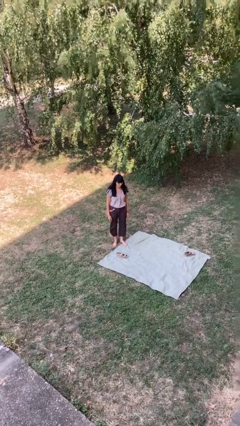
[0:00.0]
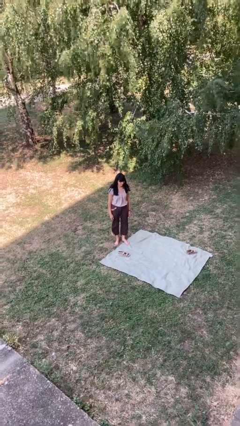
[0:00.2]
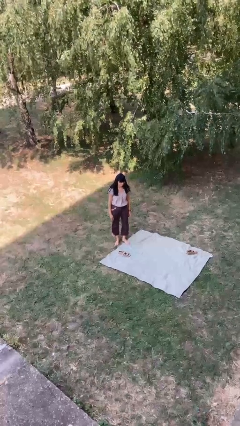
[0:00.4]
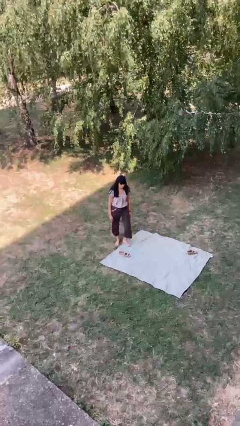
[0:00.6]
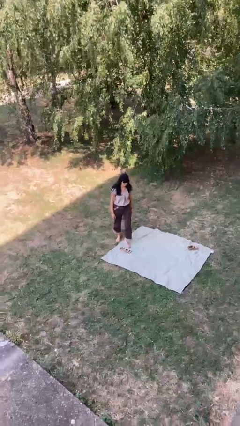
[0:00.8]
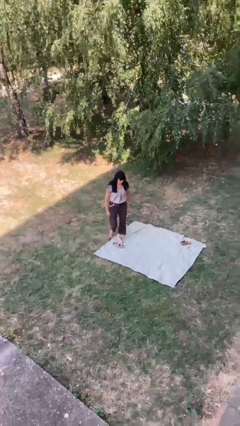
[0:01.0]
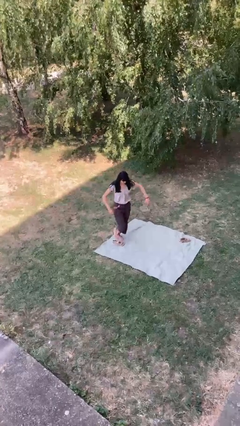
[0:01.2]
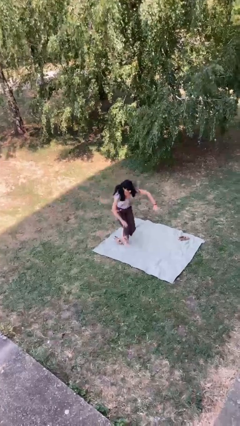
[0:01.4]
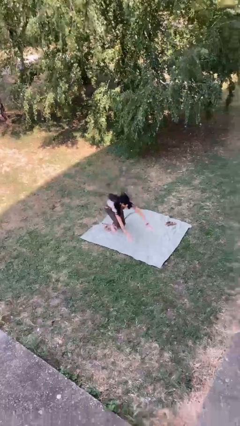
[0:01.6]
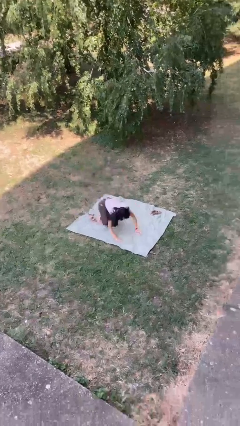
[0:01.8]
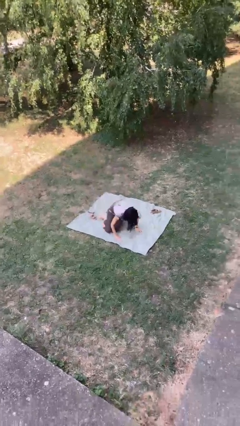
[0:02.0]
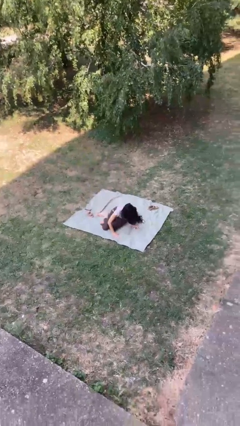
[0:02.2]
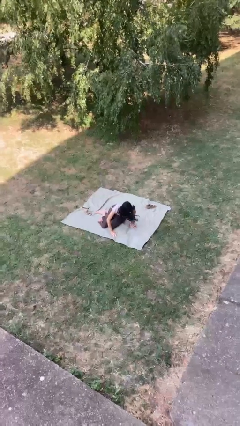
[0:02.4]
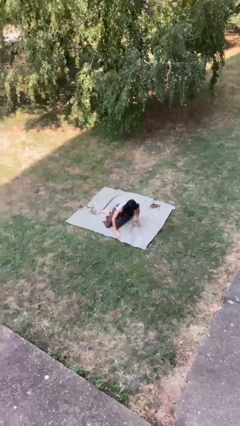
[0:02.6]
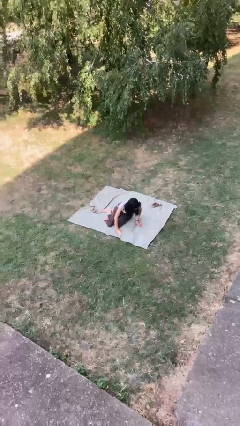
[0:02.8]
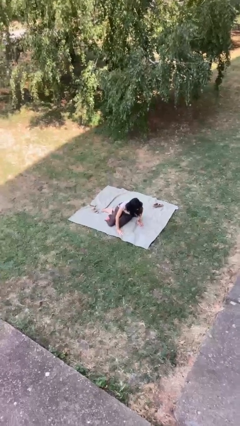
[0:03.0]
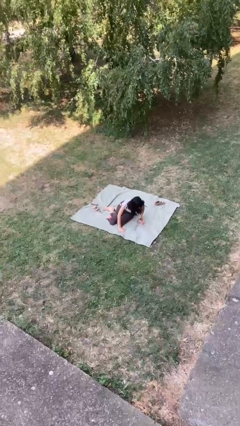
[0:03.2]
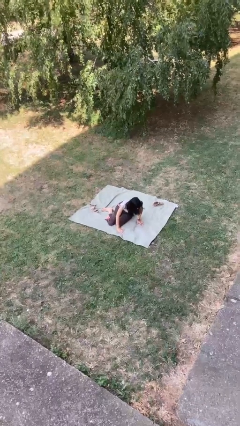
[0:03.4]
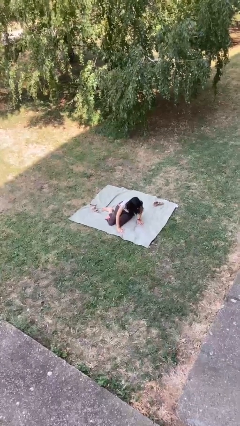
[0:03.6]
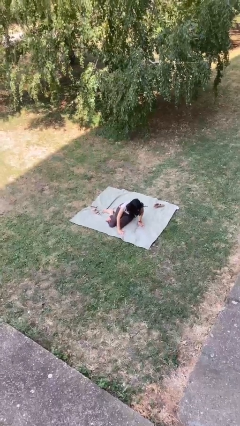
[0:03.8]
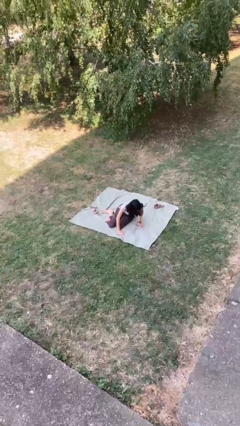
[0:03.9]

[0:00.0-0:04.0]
person trips on object on floor

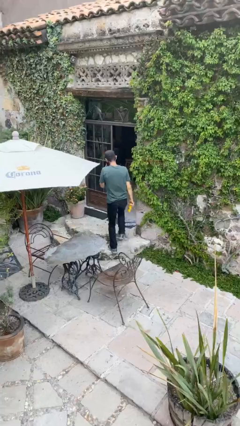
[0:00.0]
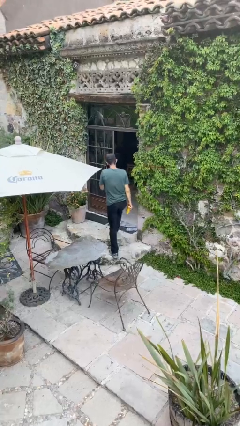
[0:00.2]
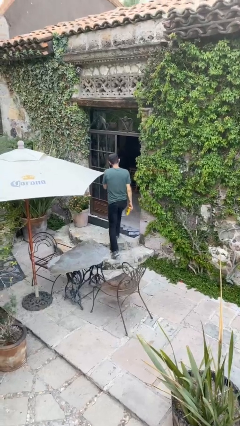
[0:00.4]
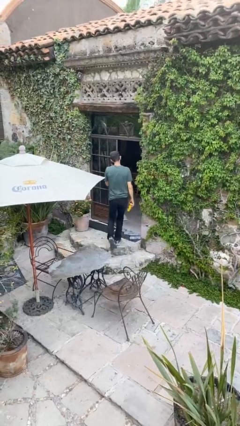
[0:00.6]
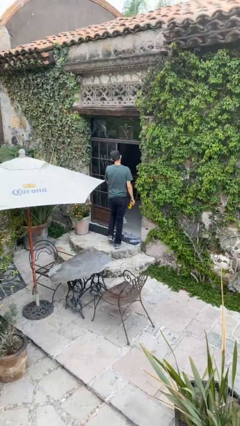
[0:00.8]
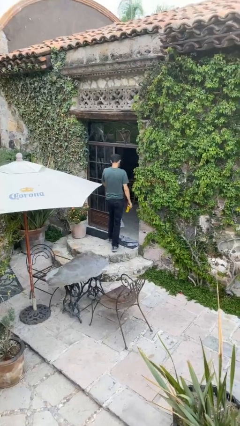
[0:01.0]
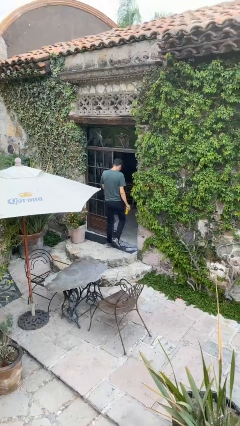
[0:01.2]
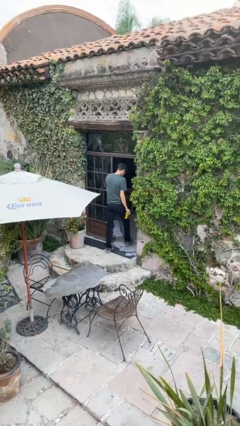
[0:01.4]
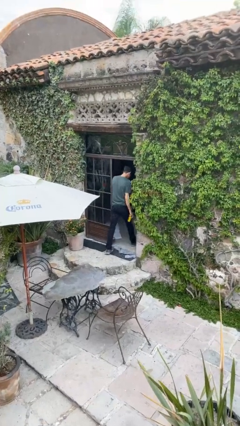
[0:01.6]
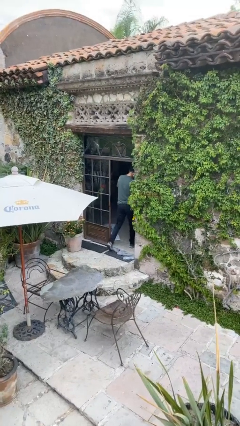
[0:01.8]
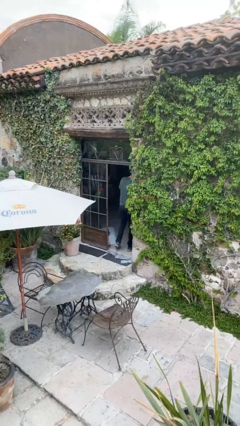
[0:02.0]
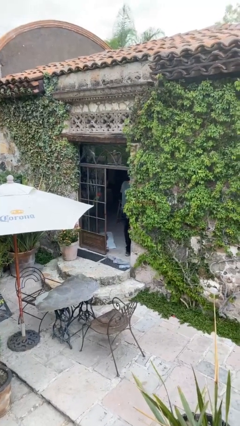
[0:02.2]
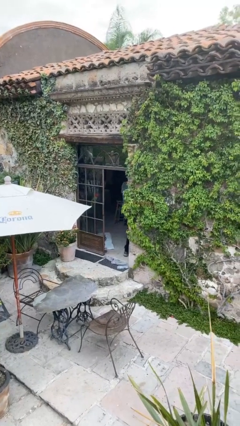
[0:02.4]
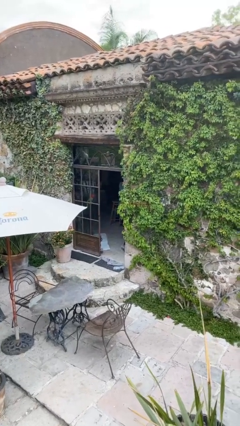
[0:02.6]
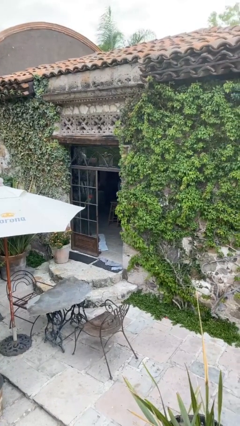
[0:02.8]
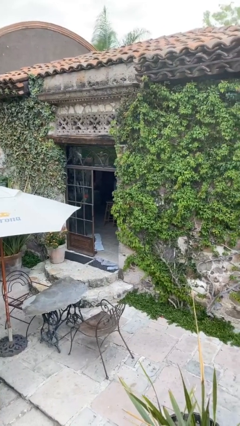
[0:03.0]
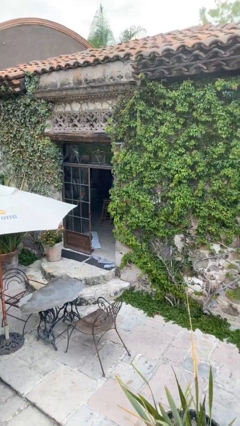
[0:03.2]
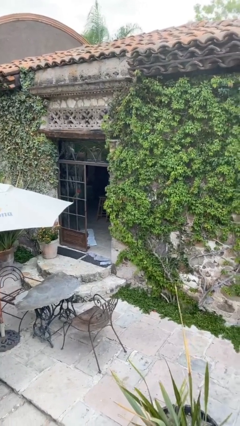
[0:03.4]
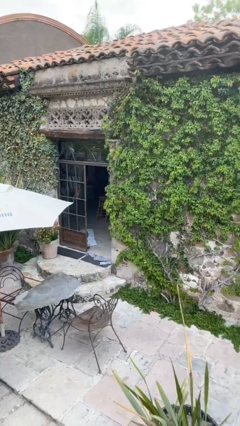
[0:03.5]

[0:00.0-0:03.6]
person exits scene through structure

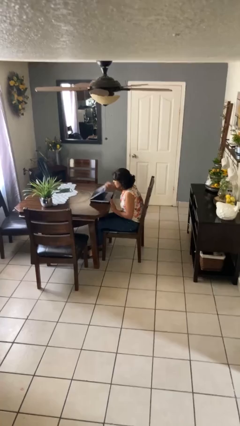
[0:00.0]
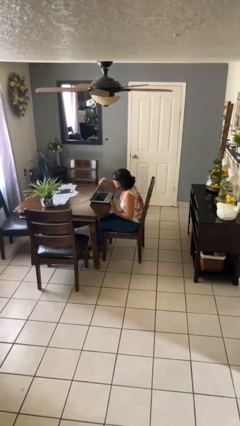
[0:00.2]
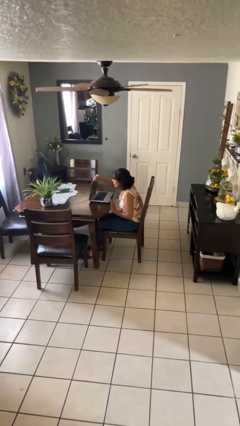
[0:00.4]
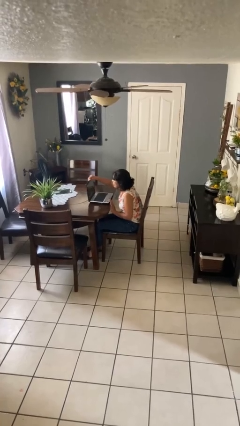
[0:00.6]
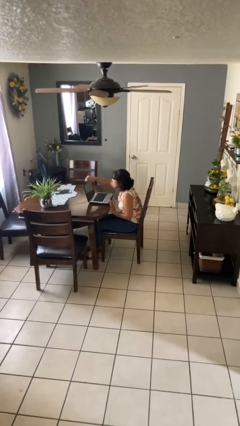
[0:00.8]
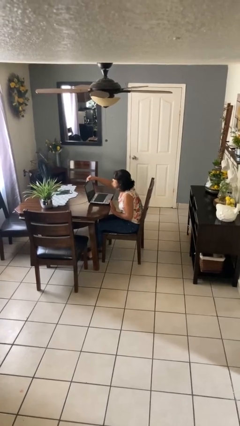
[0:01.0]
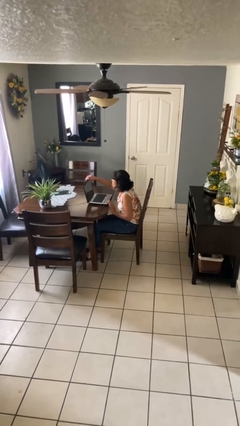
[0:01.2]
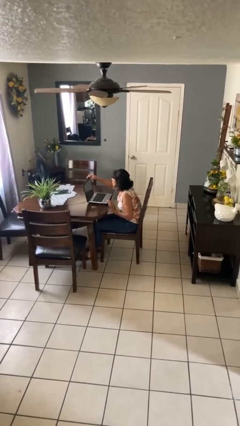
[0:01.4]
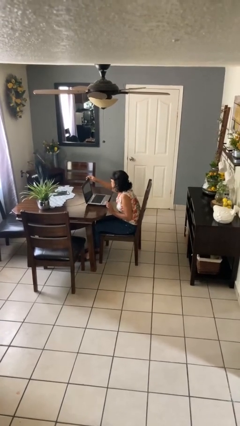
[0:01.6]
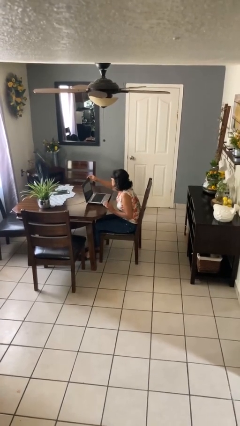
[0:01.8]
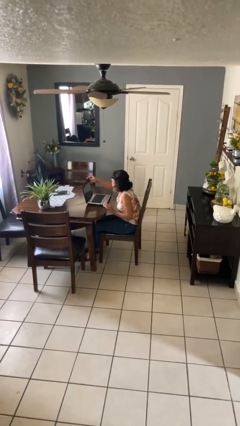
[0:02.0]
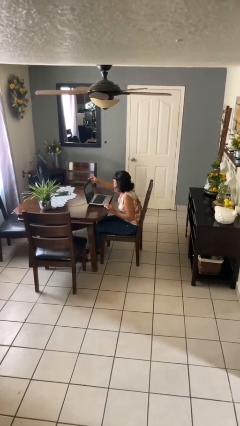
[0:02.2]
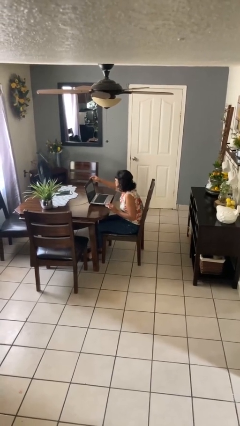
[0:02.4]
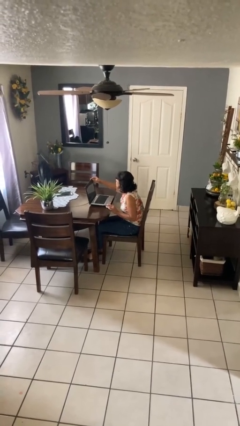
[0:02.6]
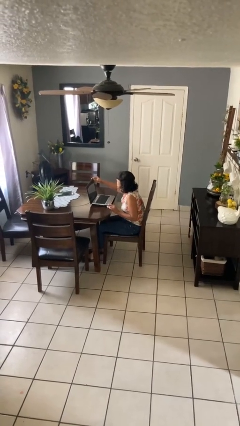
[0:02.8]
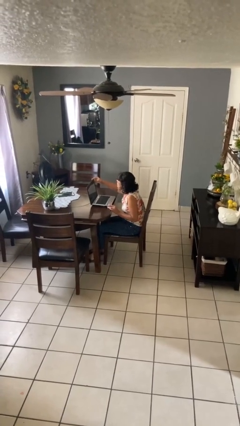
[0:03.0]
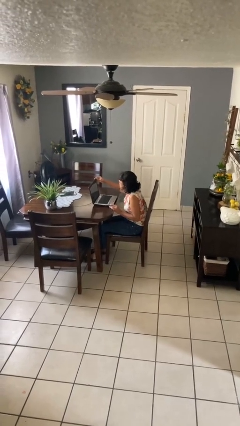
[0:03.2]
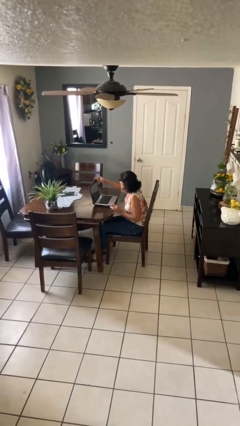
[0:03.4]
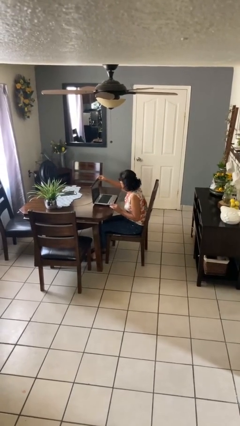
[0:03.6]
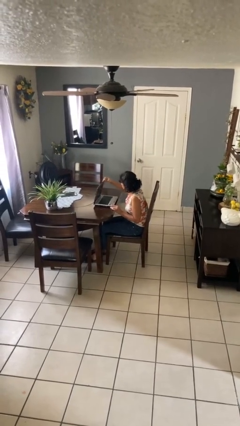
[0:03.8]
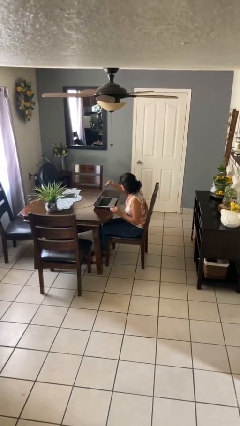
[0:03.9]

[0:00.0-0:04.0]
person opens laptop

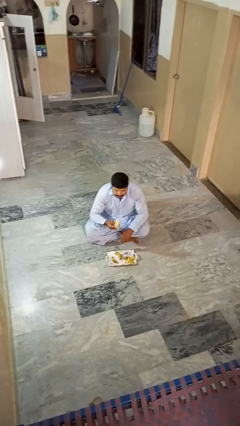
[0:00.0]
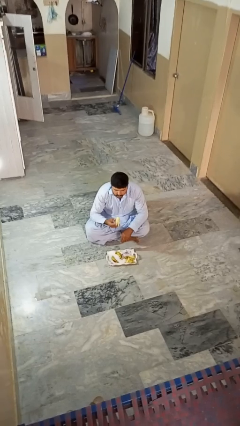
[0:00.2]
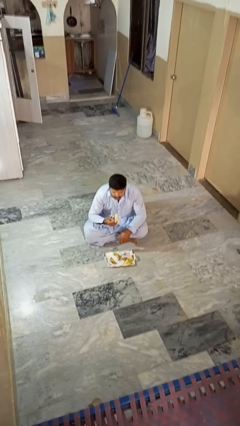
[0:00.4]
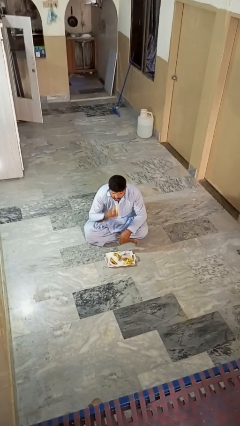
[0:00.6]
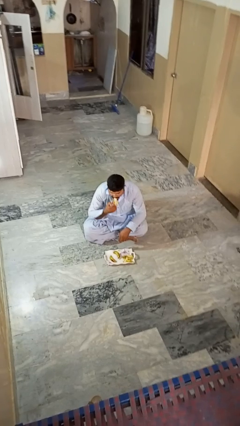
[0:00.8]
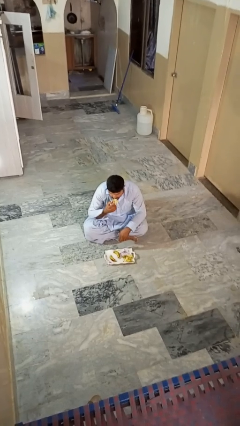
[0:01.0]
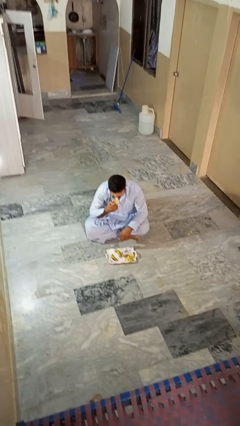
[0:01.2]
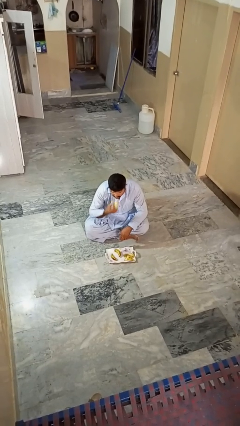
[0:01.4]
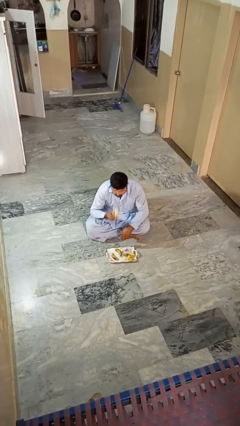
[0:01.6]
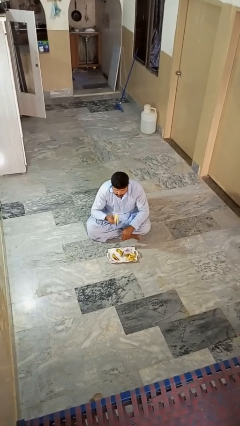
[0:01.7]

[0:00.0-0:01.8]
person eats banana

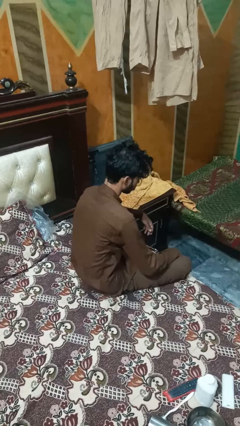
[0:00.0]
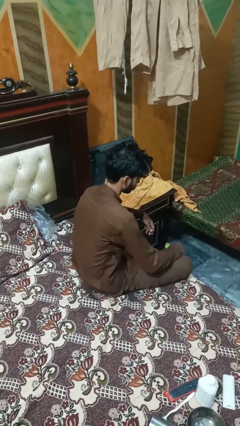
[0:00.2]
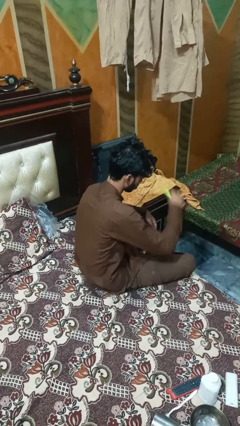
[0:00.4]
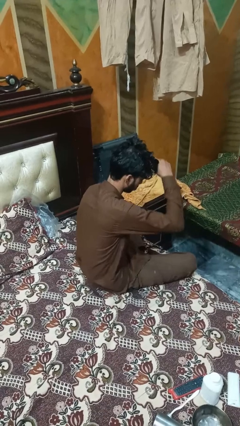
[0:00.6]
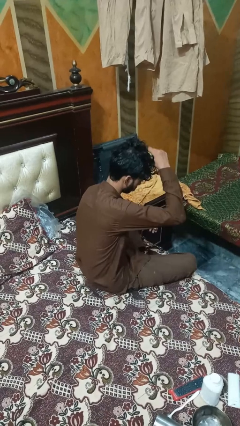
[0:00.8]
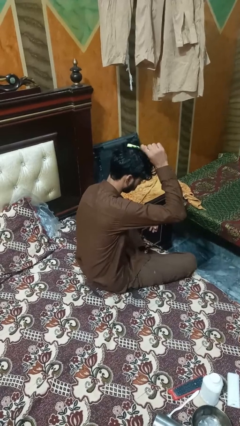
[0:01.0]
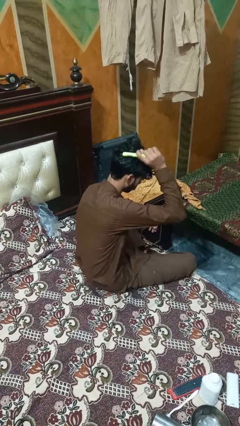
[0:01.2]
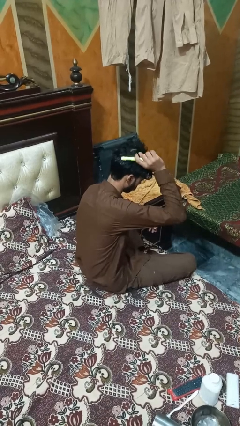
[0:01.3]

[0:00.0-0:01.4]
person brushes hair

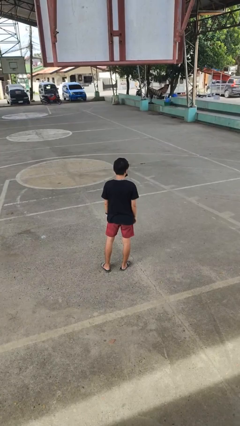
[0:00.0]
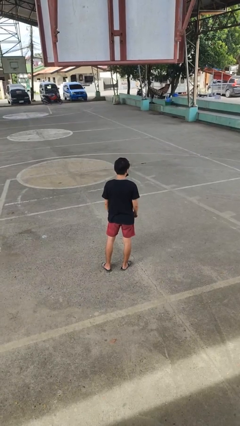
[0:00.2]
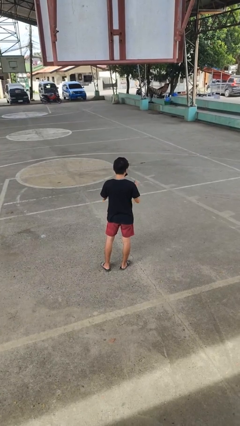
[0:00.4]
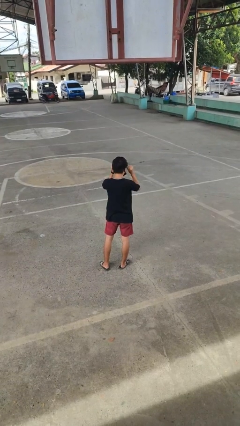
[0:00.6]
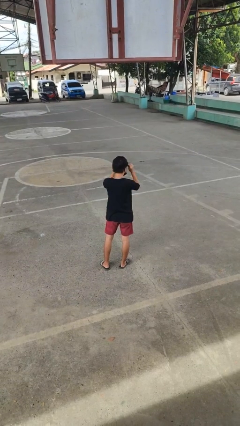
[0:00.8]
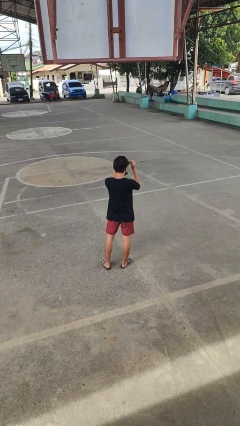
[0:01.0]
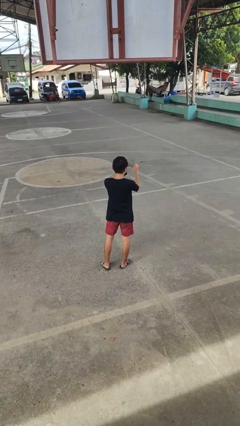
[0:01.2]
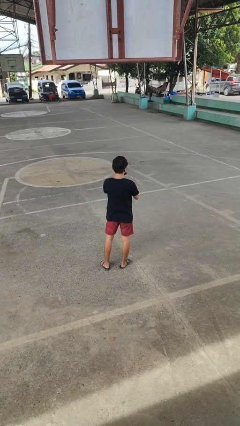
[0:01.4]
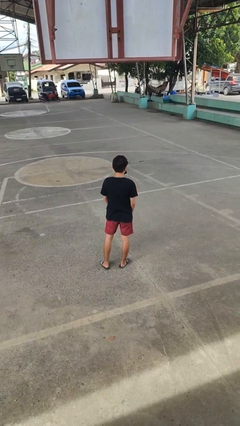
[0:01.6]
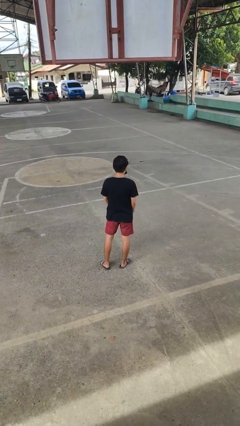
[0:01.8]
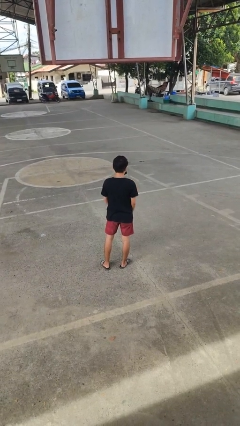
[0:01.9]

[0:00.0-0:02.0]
person takes off glasses

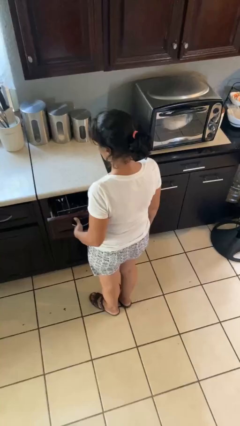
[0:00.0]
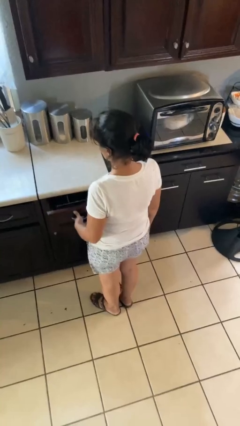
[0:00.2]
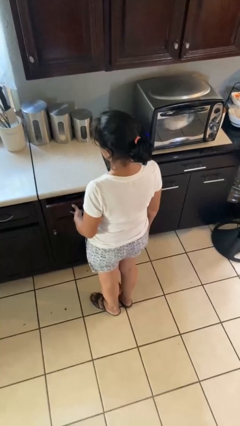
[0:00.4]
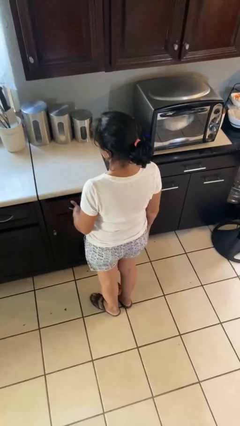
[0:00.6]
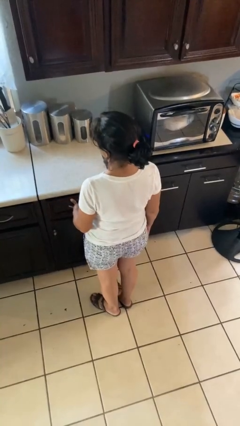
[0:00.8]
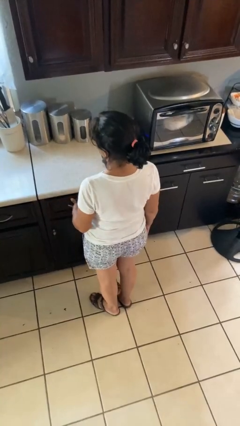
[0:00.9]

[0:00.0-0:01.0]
person closes kitchen drawer
